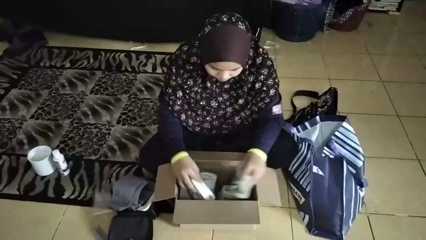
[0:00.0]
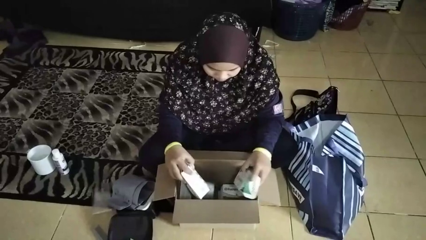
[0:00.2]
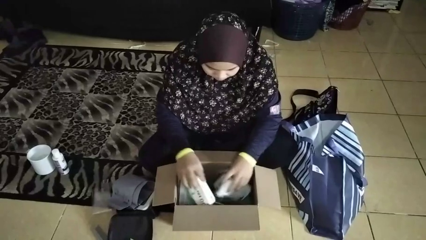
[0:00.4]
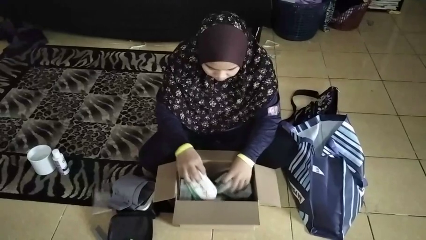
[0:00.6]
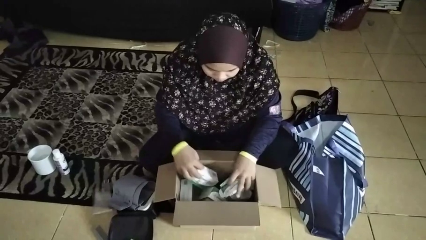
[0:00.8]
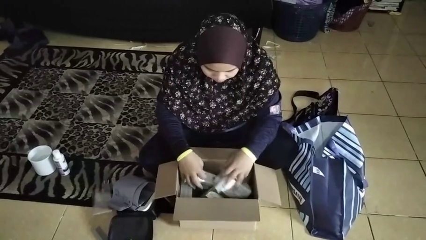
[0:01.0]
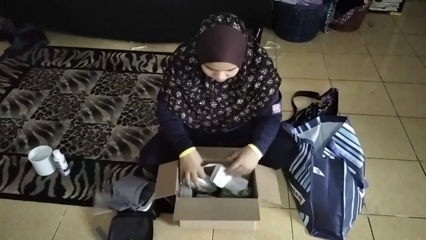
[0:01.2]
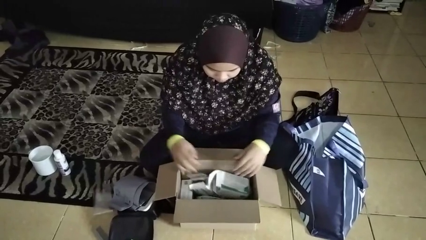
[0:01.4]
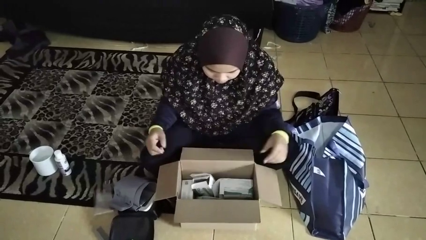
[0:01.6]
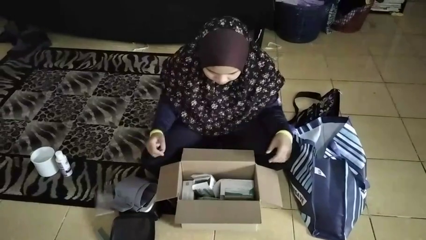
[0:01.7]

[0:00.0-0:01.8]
person searches in box

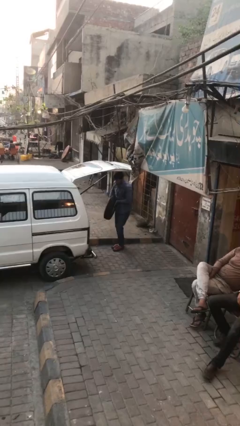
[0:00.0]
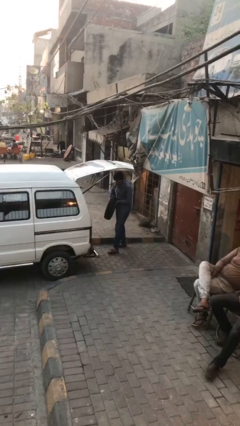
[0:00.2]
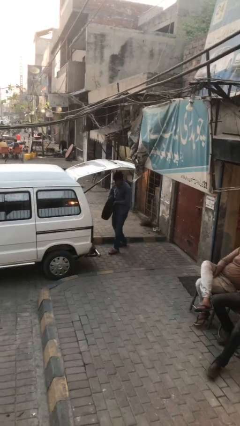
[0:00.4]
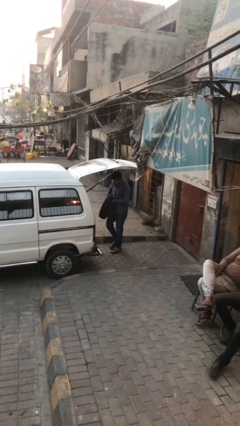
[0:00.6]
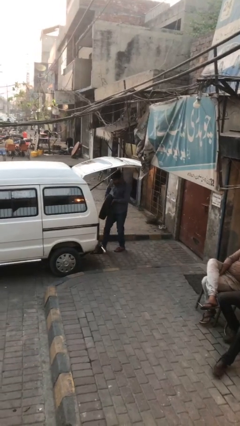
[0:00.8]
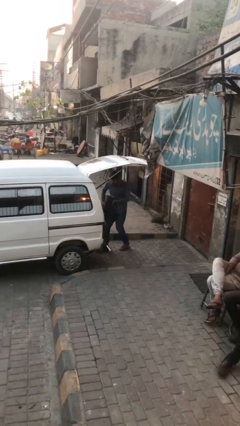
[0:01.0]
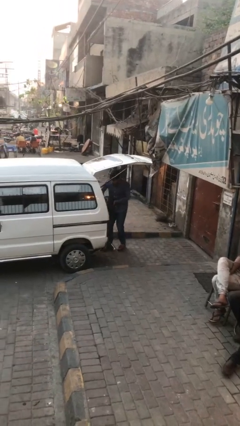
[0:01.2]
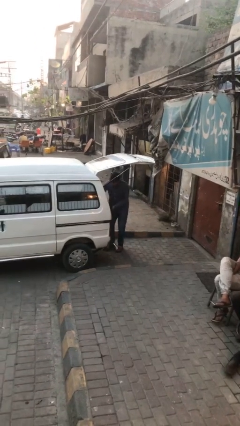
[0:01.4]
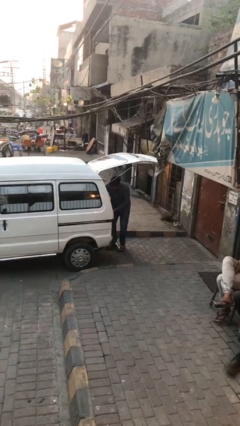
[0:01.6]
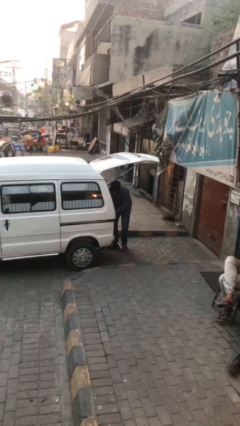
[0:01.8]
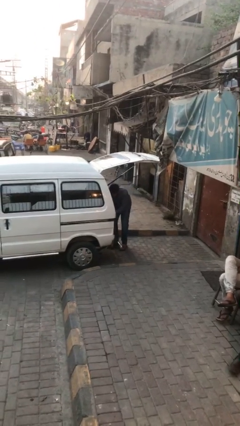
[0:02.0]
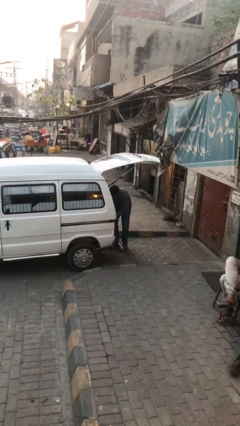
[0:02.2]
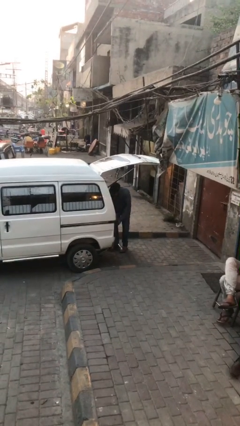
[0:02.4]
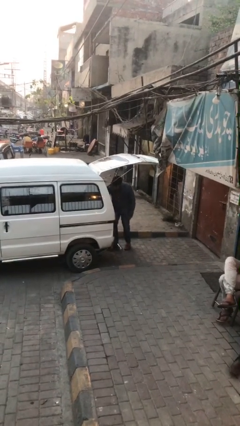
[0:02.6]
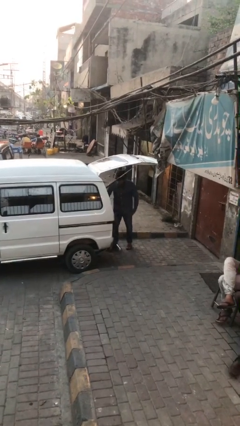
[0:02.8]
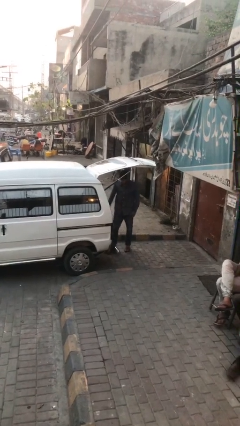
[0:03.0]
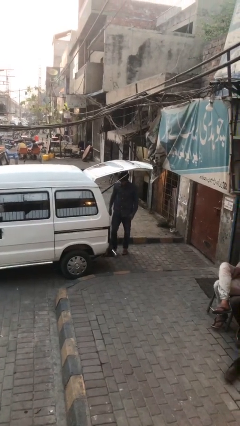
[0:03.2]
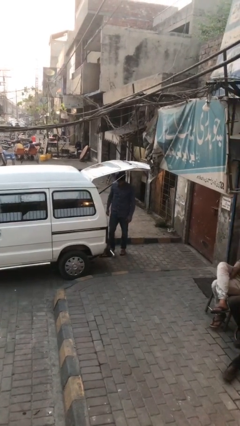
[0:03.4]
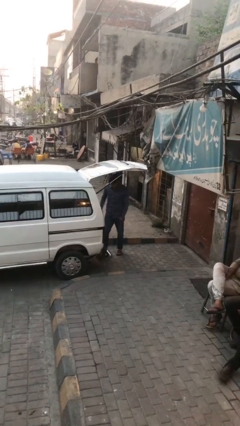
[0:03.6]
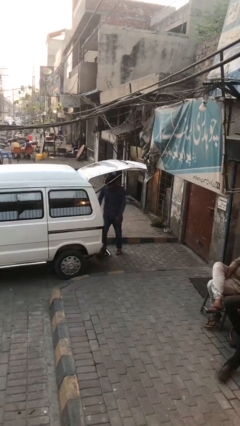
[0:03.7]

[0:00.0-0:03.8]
person loads car

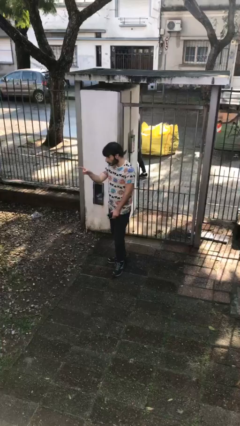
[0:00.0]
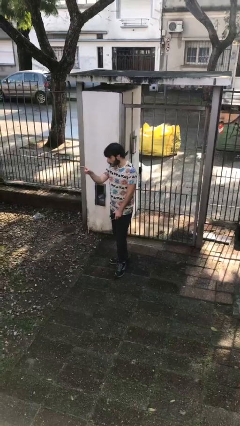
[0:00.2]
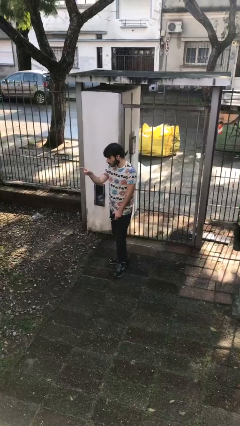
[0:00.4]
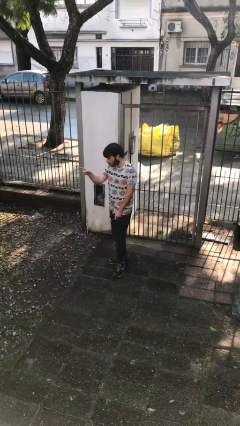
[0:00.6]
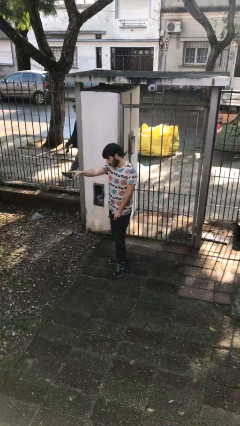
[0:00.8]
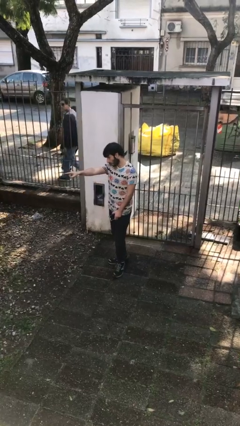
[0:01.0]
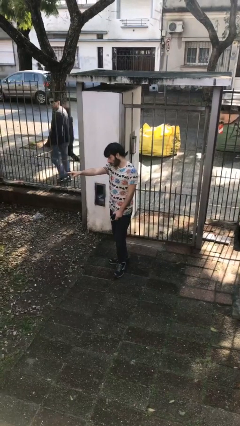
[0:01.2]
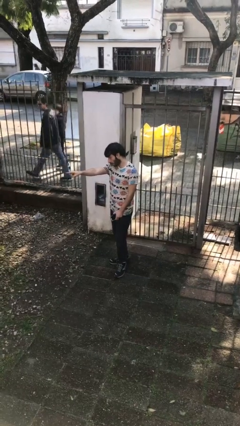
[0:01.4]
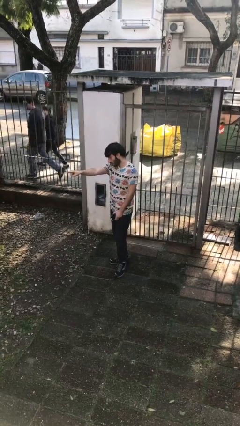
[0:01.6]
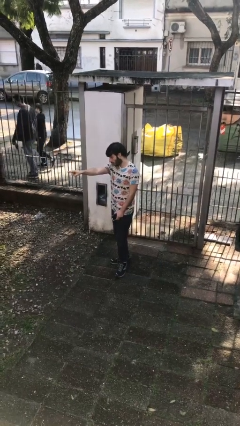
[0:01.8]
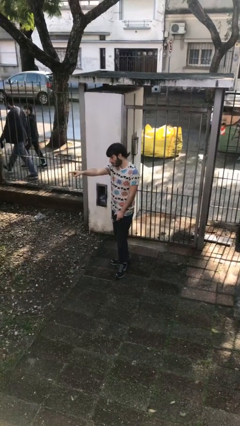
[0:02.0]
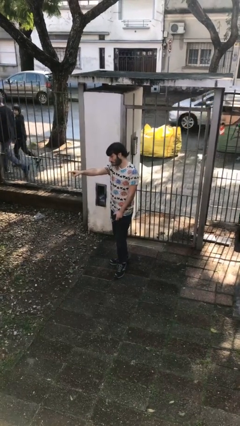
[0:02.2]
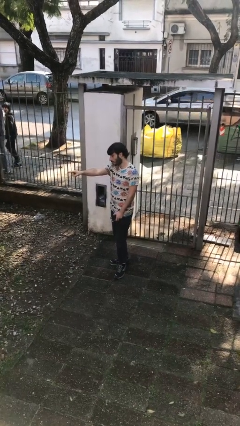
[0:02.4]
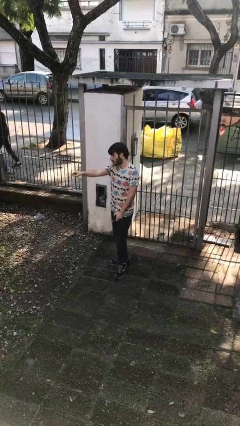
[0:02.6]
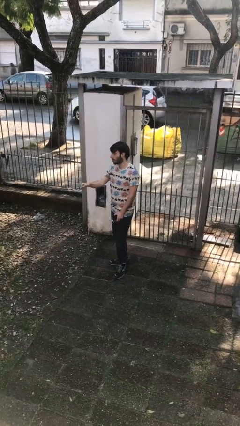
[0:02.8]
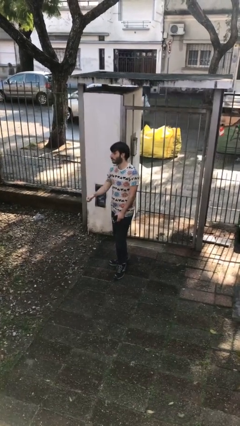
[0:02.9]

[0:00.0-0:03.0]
person points at person

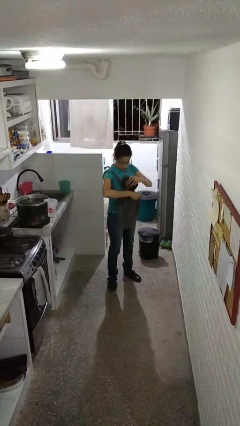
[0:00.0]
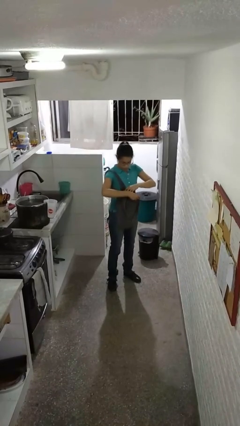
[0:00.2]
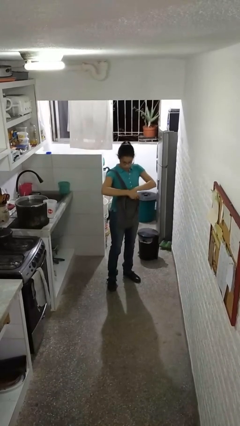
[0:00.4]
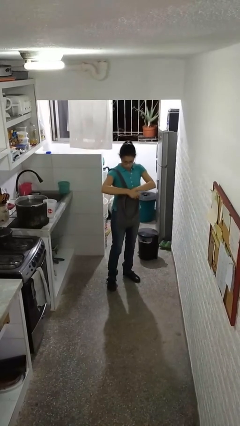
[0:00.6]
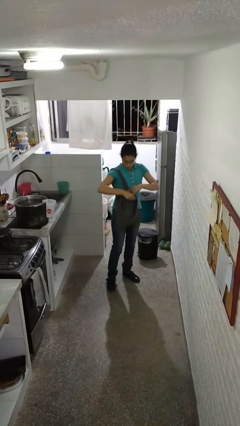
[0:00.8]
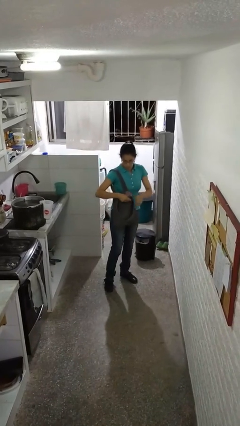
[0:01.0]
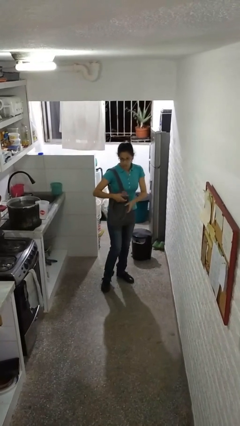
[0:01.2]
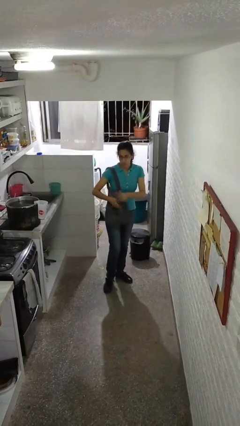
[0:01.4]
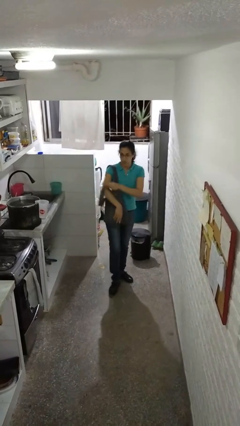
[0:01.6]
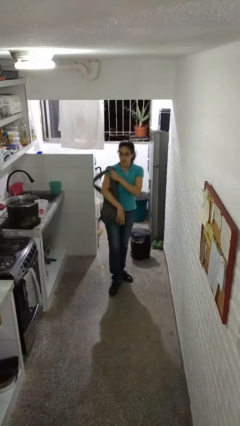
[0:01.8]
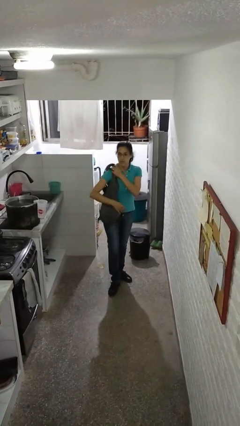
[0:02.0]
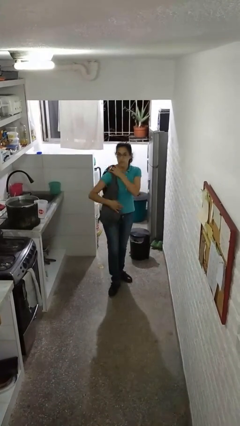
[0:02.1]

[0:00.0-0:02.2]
person puts object into purse

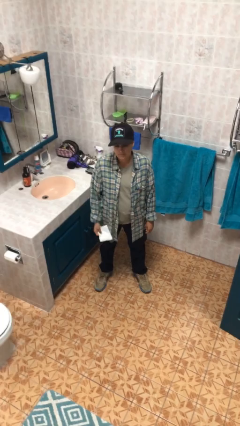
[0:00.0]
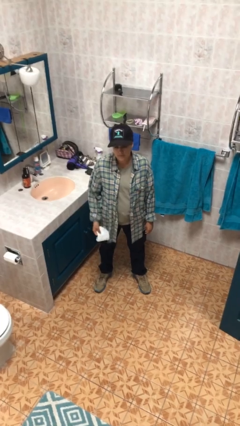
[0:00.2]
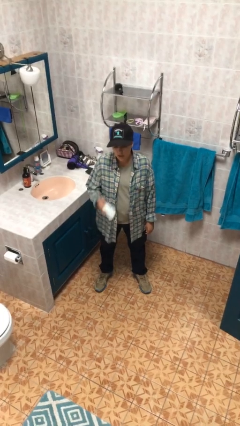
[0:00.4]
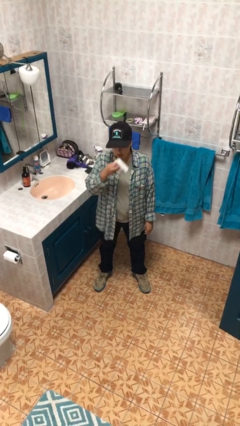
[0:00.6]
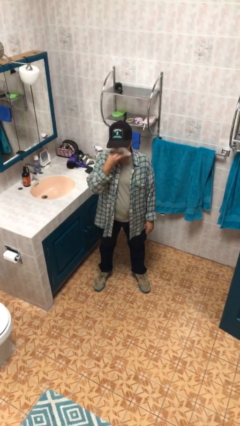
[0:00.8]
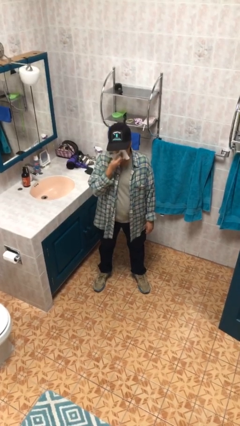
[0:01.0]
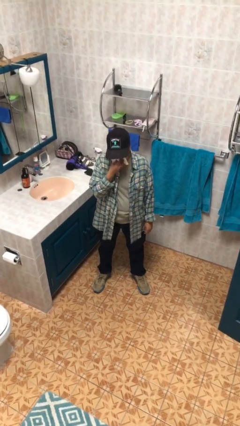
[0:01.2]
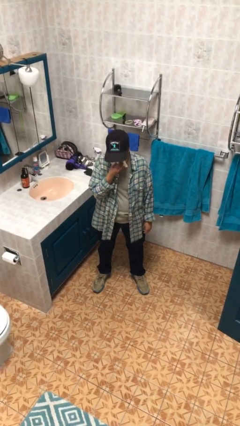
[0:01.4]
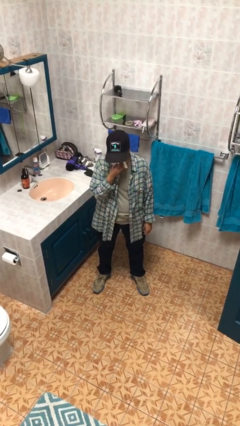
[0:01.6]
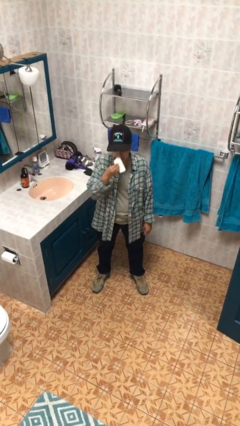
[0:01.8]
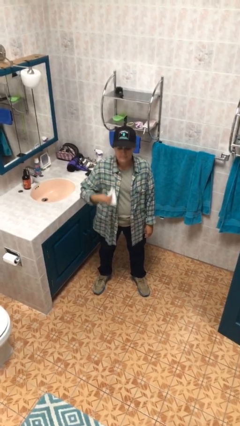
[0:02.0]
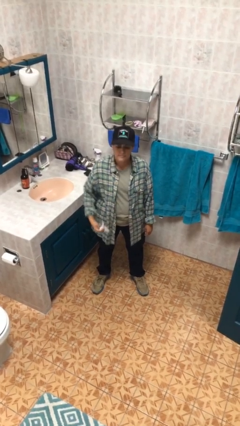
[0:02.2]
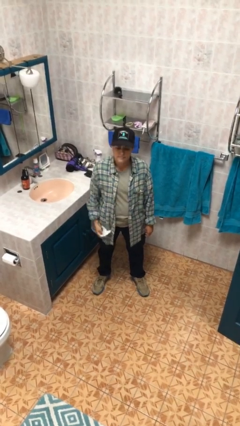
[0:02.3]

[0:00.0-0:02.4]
person blows nose

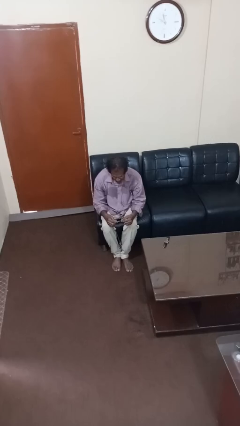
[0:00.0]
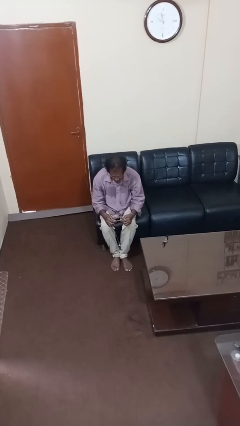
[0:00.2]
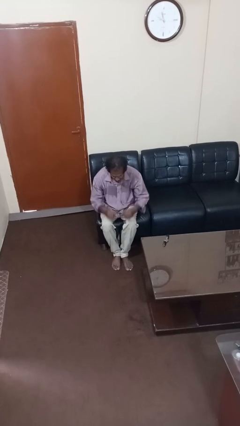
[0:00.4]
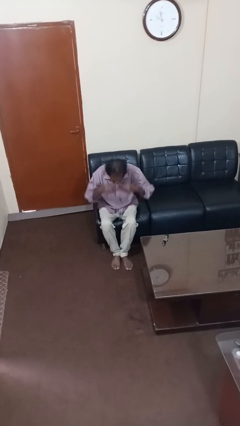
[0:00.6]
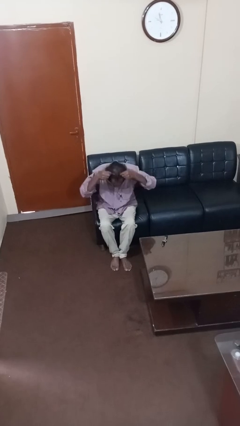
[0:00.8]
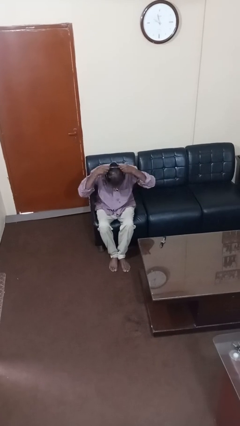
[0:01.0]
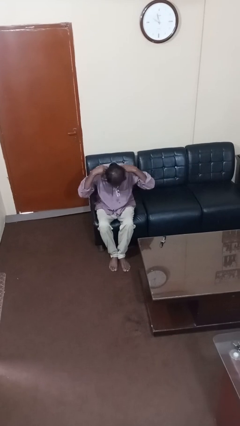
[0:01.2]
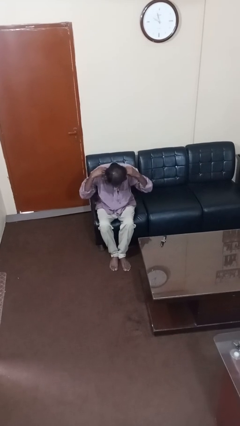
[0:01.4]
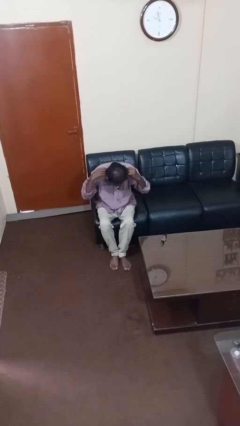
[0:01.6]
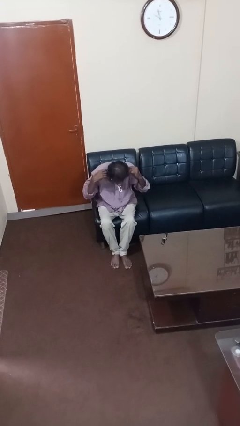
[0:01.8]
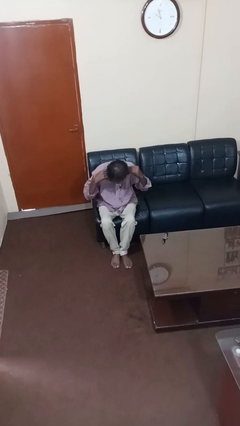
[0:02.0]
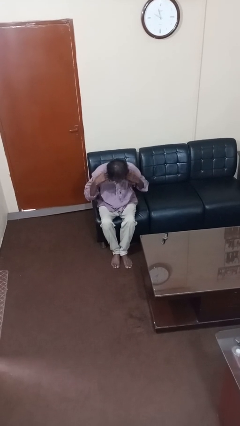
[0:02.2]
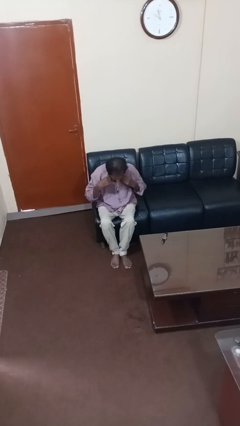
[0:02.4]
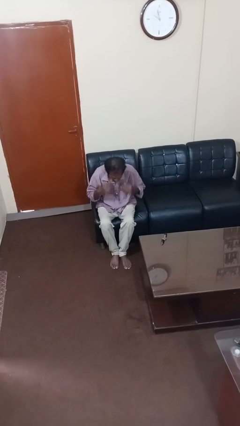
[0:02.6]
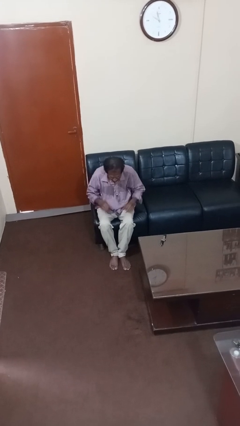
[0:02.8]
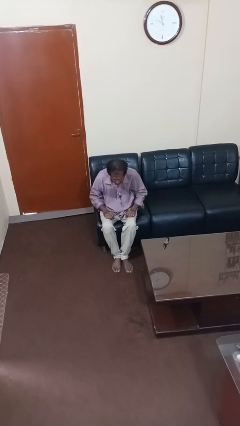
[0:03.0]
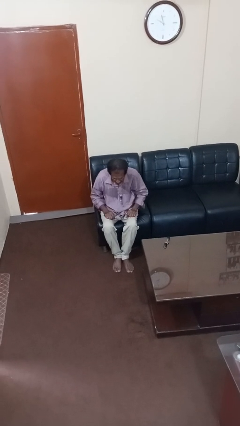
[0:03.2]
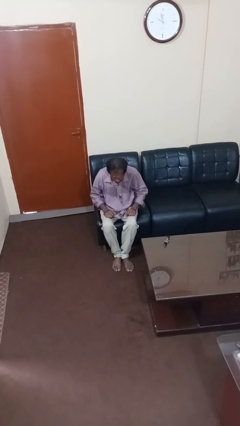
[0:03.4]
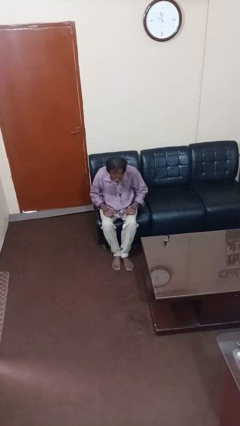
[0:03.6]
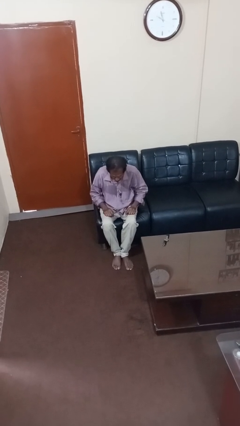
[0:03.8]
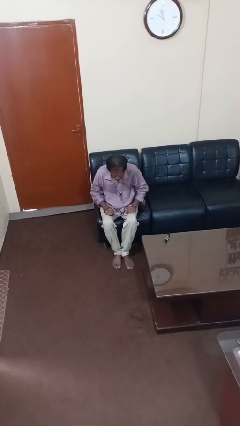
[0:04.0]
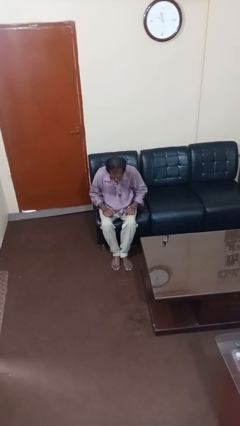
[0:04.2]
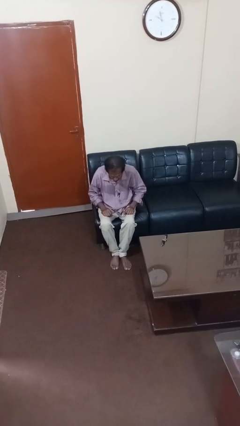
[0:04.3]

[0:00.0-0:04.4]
person puts on necklace
